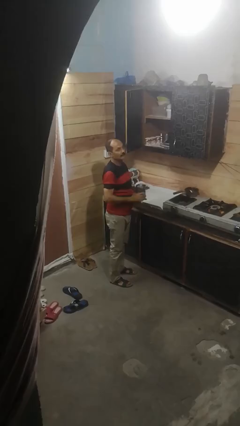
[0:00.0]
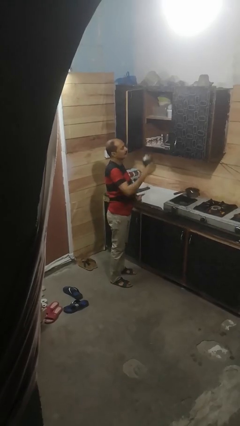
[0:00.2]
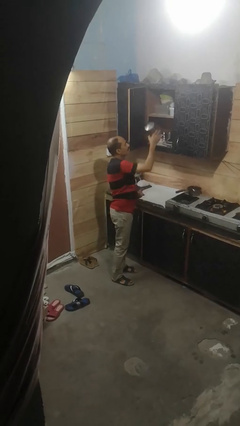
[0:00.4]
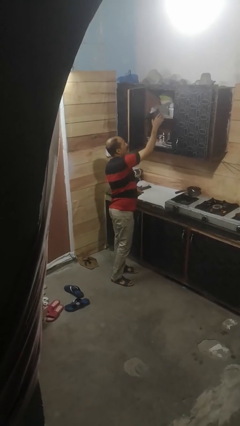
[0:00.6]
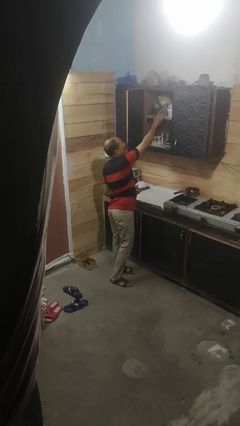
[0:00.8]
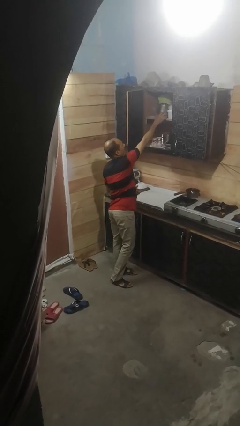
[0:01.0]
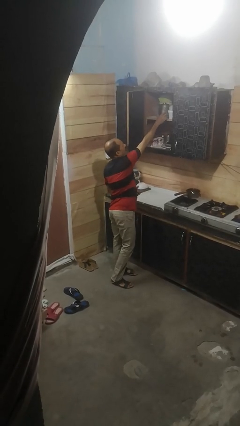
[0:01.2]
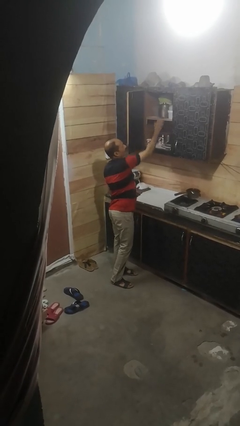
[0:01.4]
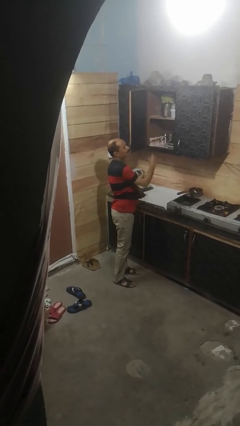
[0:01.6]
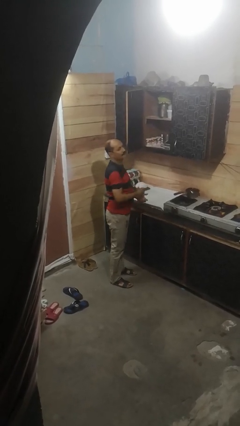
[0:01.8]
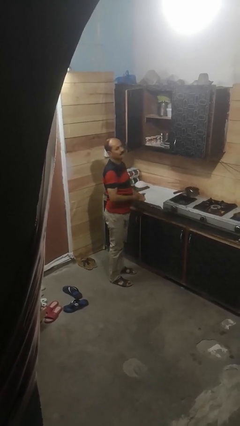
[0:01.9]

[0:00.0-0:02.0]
person puts down object into cabinet

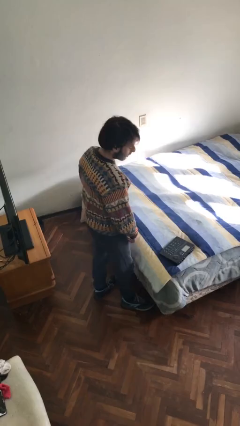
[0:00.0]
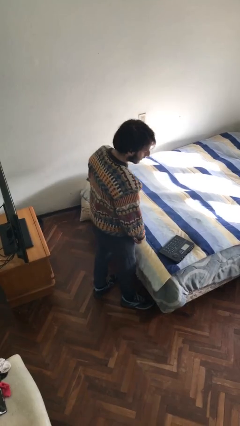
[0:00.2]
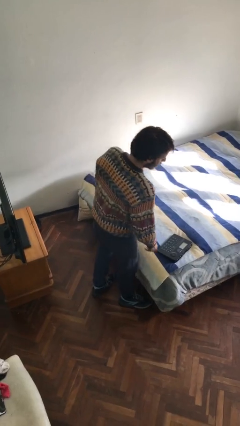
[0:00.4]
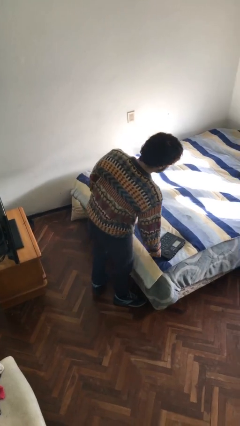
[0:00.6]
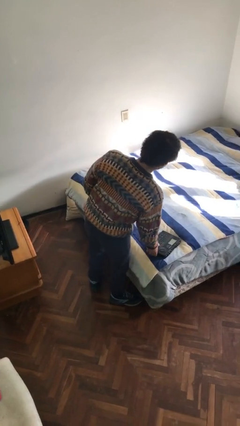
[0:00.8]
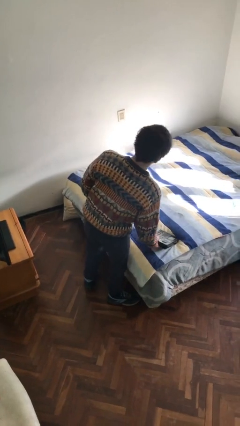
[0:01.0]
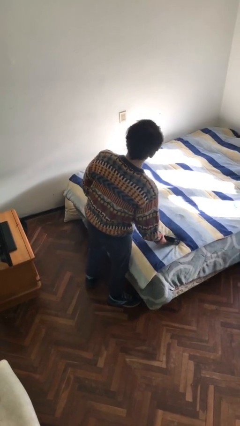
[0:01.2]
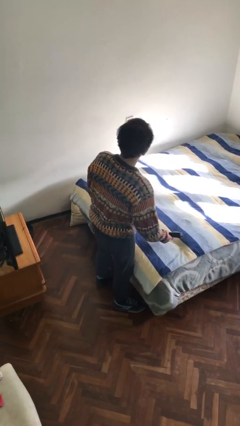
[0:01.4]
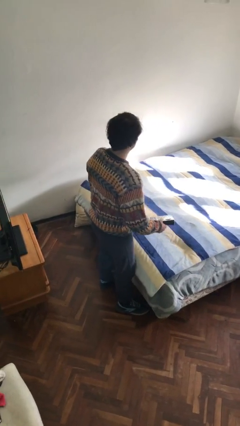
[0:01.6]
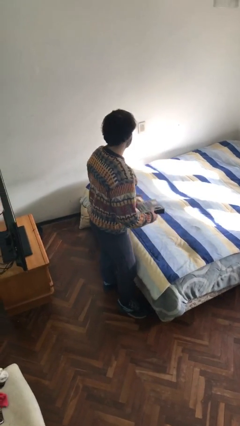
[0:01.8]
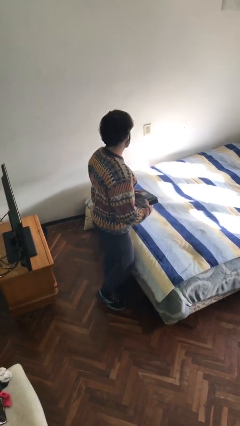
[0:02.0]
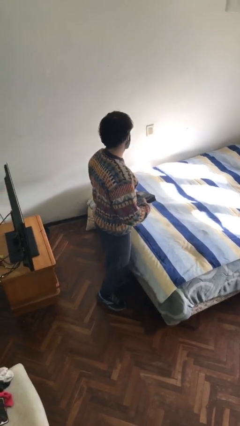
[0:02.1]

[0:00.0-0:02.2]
person picks up object from bed

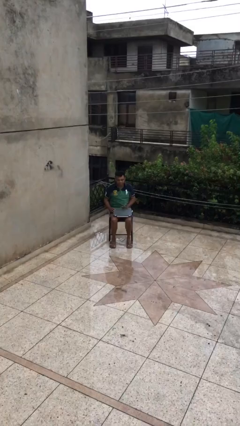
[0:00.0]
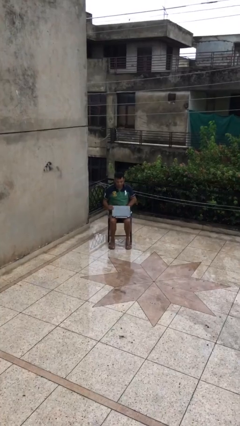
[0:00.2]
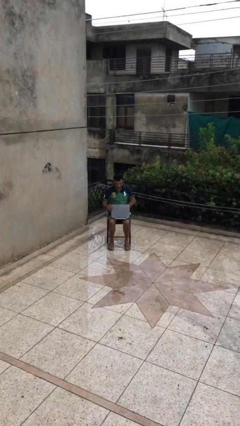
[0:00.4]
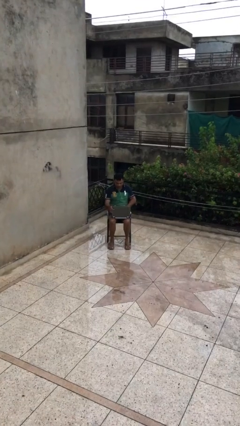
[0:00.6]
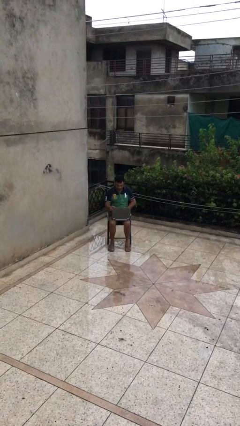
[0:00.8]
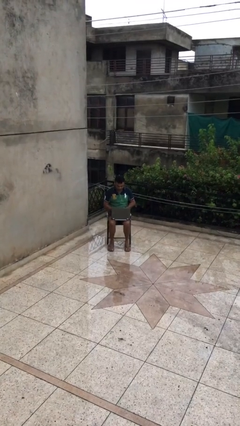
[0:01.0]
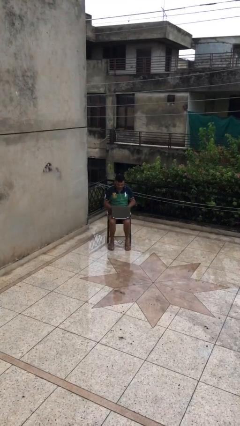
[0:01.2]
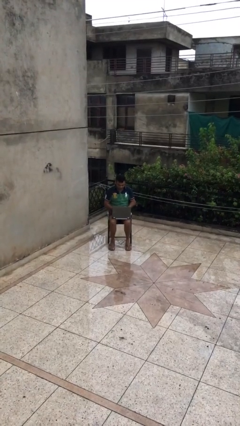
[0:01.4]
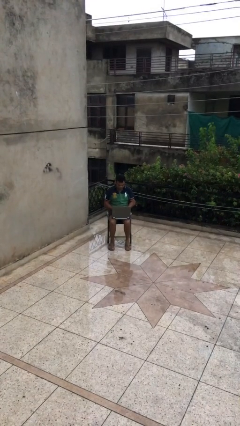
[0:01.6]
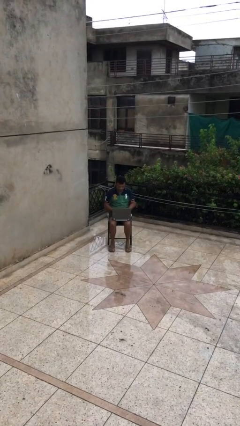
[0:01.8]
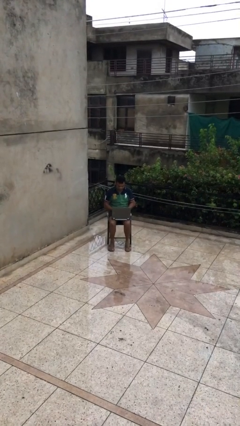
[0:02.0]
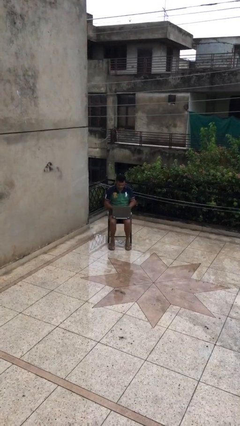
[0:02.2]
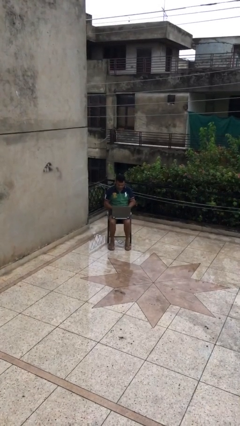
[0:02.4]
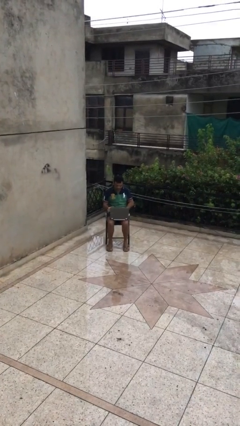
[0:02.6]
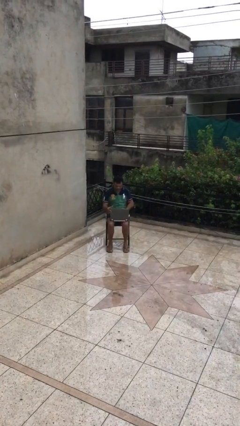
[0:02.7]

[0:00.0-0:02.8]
person interacts with laptop

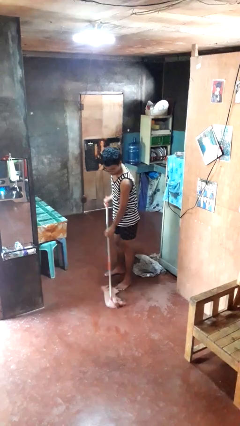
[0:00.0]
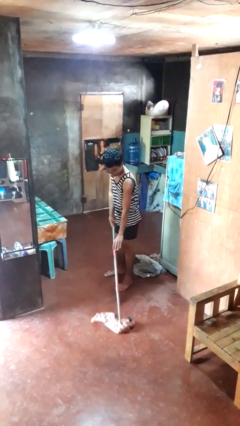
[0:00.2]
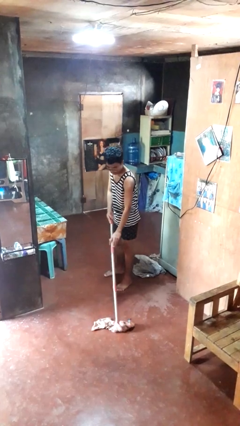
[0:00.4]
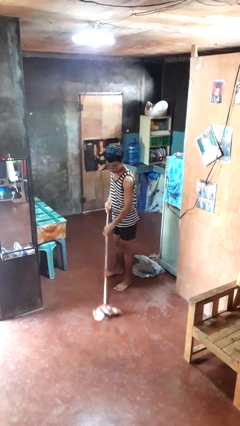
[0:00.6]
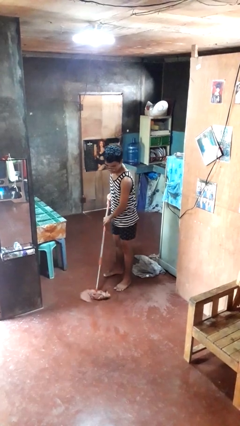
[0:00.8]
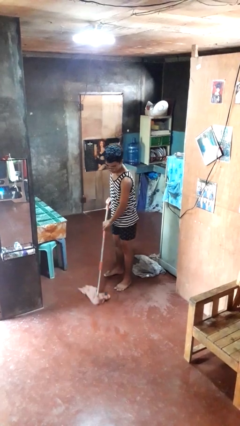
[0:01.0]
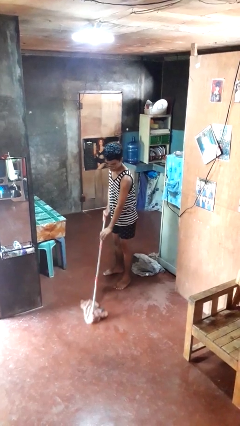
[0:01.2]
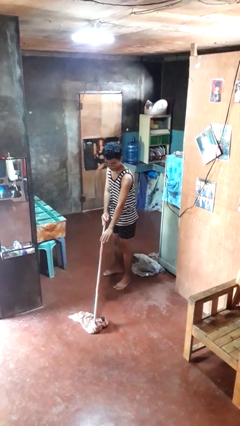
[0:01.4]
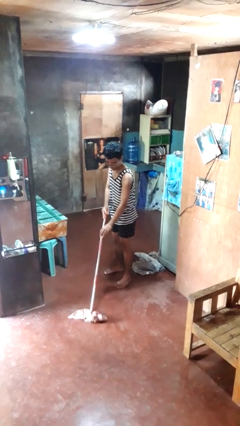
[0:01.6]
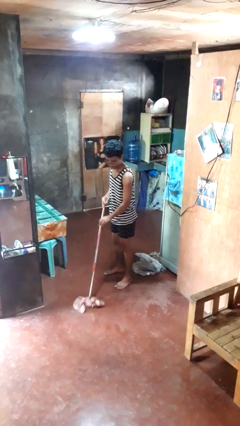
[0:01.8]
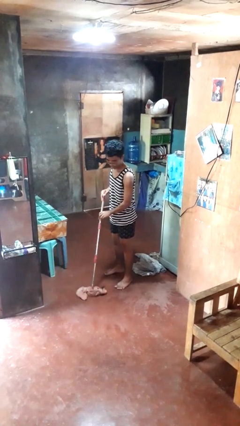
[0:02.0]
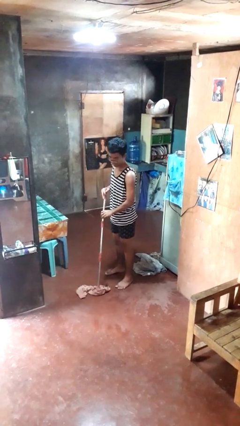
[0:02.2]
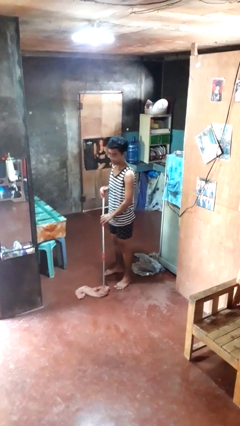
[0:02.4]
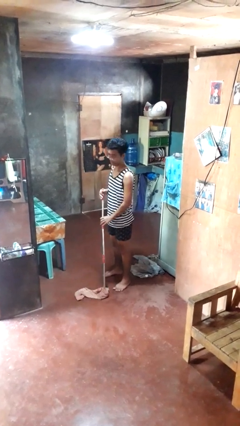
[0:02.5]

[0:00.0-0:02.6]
person mops

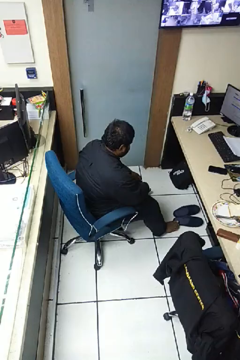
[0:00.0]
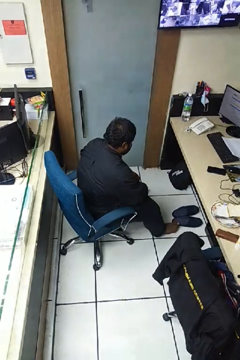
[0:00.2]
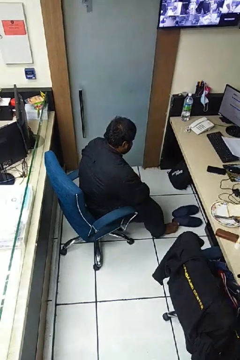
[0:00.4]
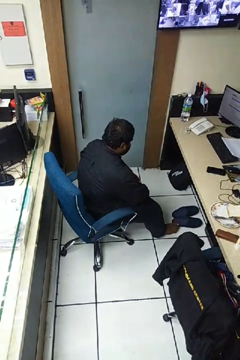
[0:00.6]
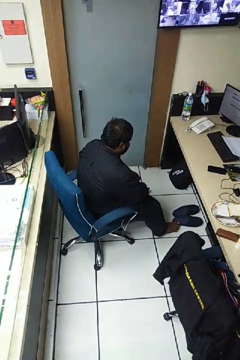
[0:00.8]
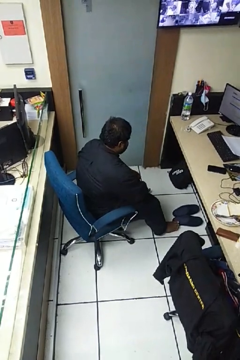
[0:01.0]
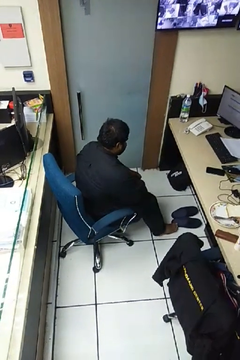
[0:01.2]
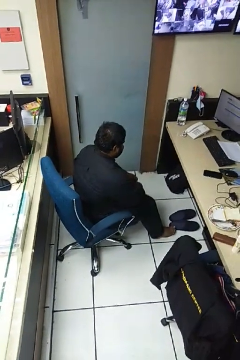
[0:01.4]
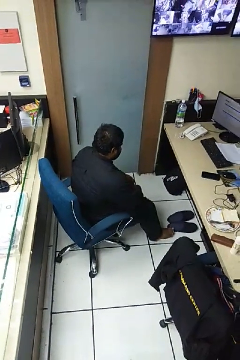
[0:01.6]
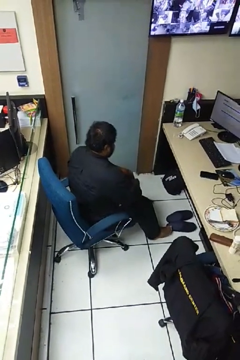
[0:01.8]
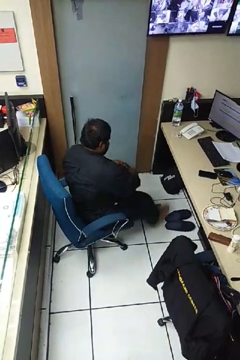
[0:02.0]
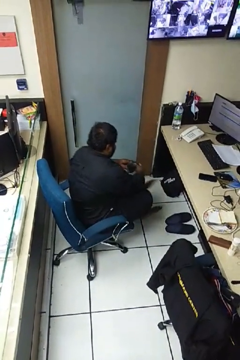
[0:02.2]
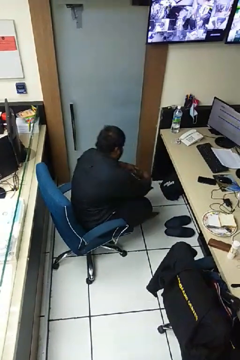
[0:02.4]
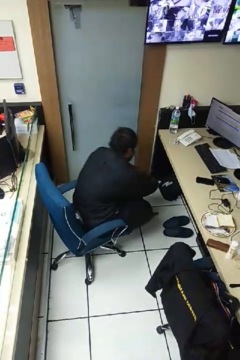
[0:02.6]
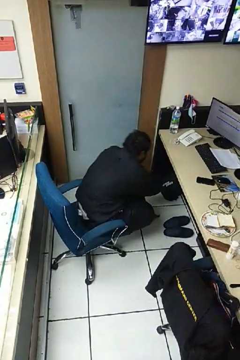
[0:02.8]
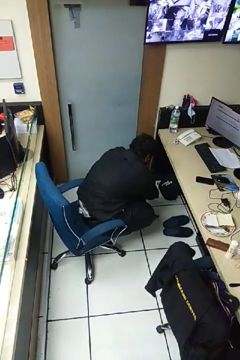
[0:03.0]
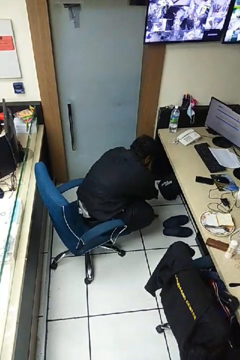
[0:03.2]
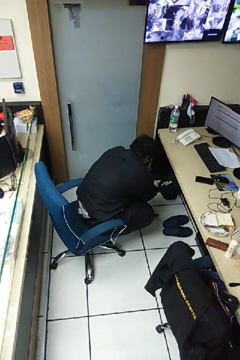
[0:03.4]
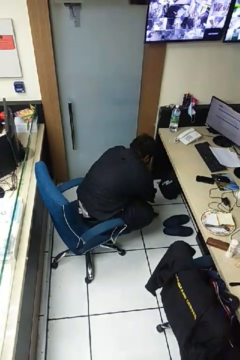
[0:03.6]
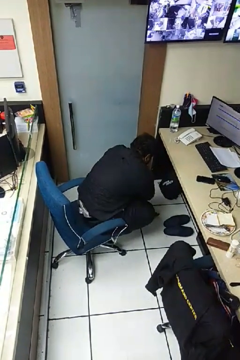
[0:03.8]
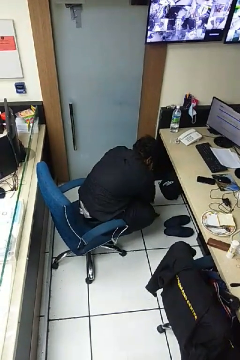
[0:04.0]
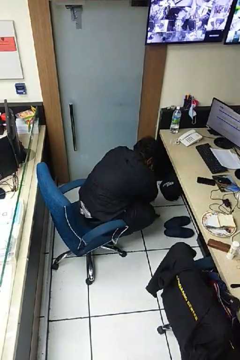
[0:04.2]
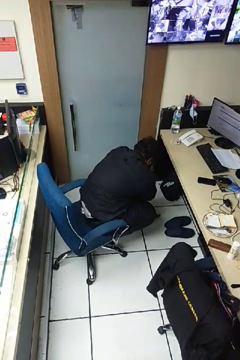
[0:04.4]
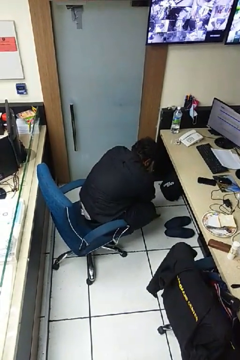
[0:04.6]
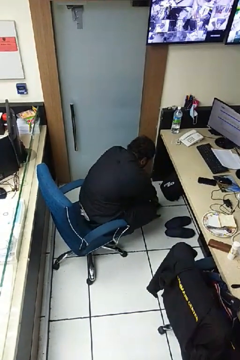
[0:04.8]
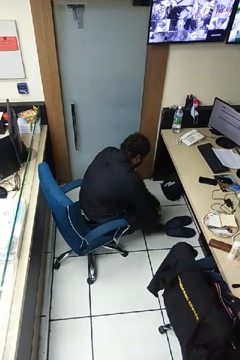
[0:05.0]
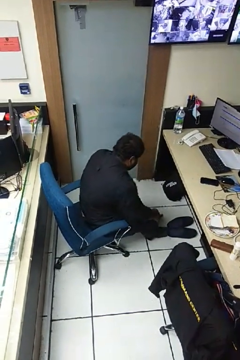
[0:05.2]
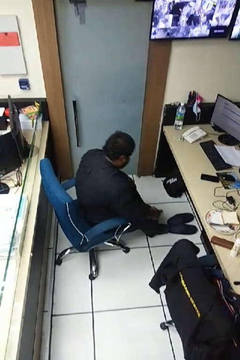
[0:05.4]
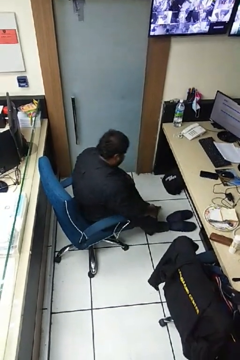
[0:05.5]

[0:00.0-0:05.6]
person puts on socks

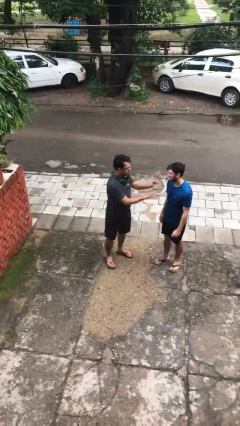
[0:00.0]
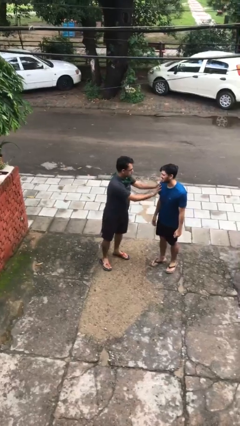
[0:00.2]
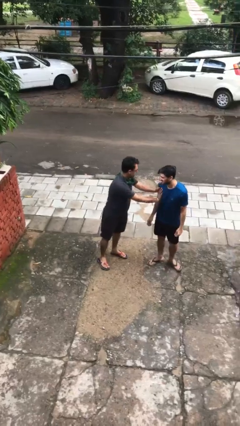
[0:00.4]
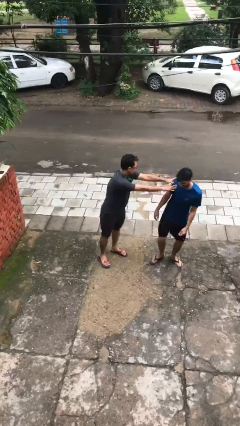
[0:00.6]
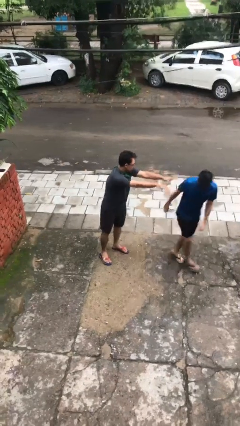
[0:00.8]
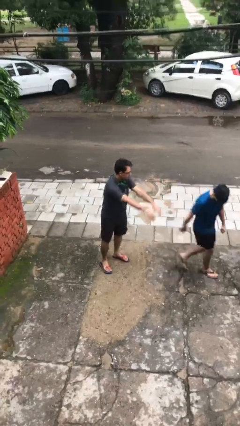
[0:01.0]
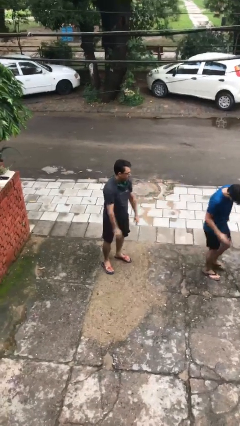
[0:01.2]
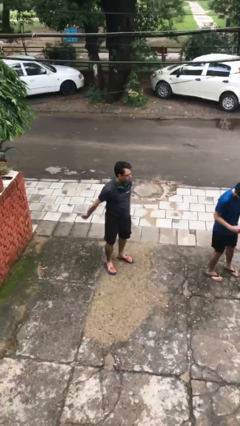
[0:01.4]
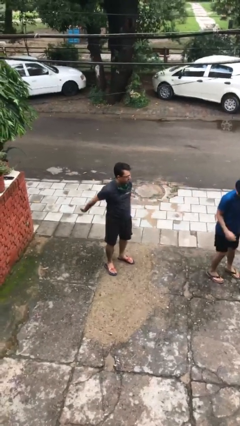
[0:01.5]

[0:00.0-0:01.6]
person shoves person

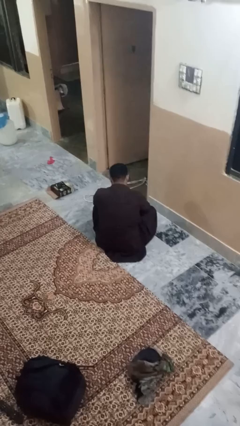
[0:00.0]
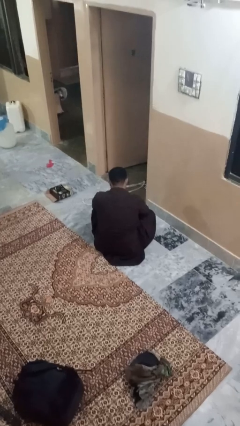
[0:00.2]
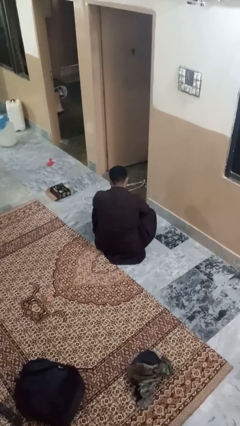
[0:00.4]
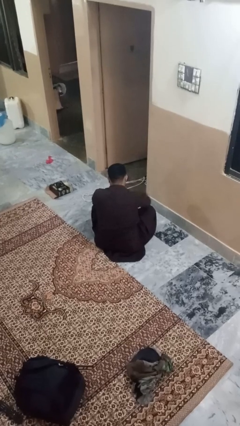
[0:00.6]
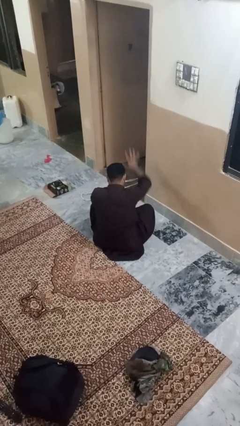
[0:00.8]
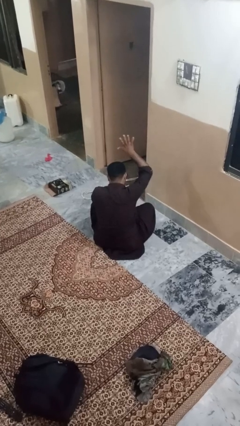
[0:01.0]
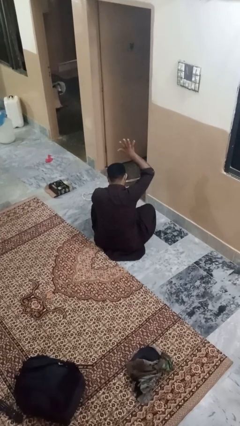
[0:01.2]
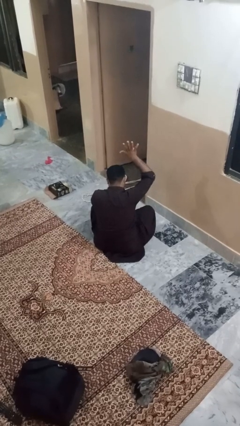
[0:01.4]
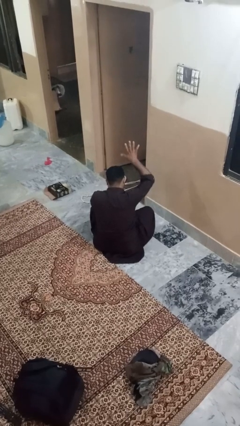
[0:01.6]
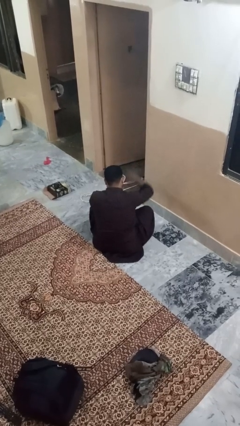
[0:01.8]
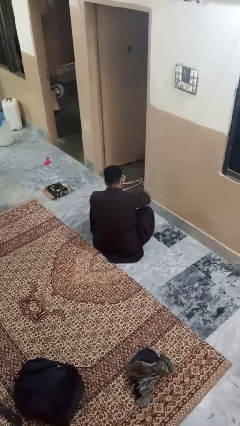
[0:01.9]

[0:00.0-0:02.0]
person gestures number five
